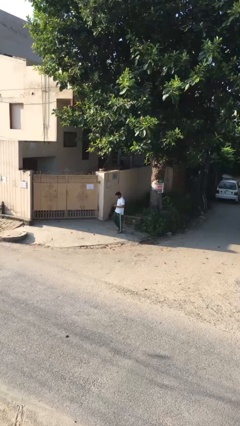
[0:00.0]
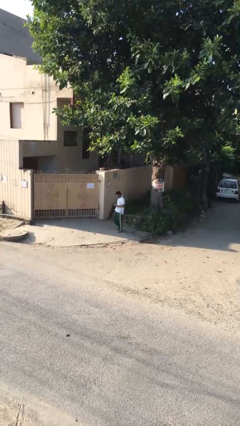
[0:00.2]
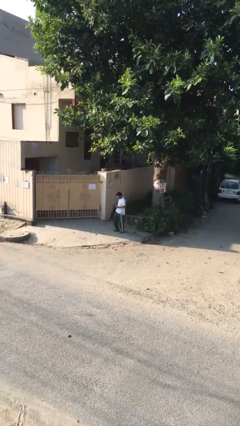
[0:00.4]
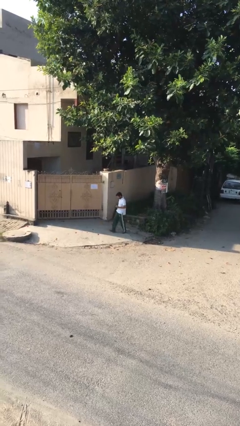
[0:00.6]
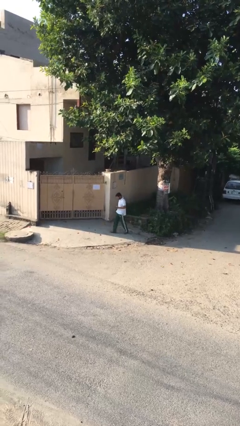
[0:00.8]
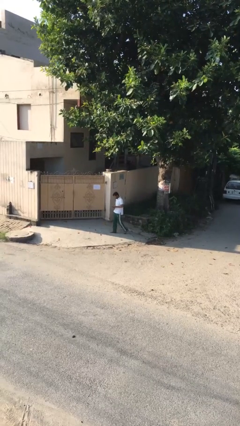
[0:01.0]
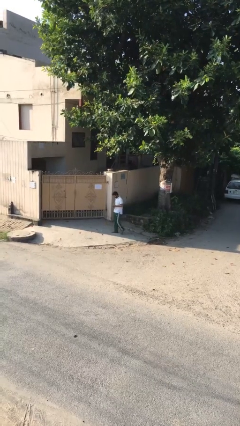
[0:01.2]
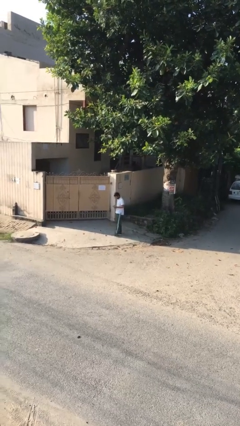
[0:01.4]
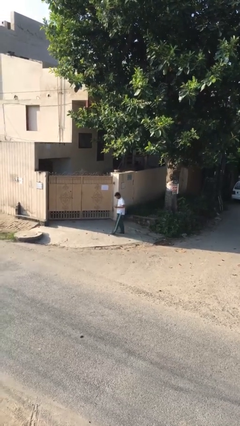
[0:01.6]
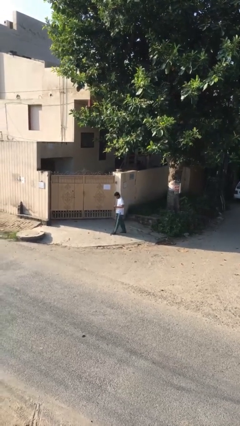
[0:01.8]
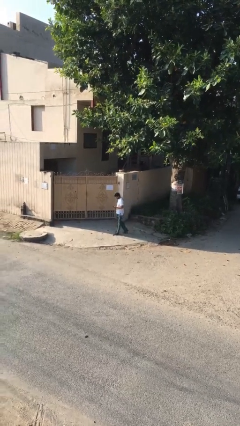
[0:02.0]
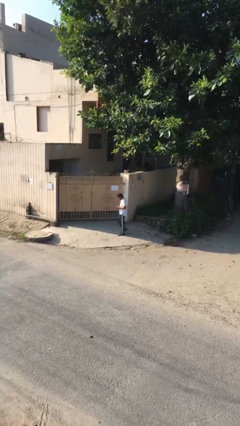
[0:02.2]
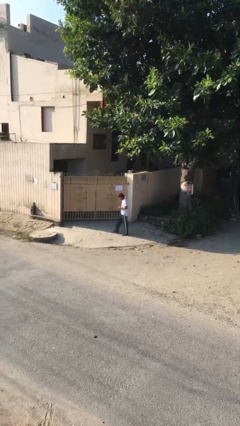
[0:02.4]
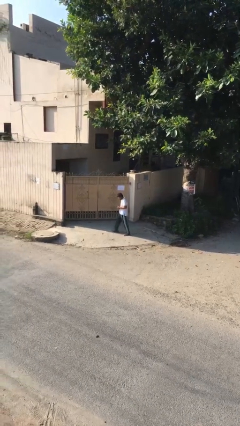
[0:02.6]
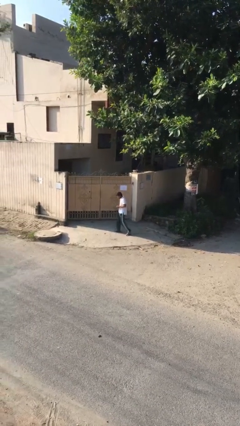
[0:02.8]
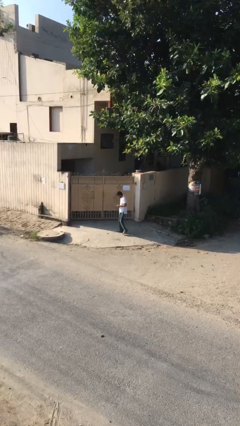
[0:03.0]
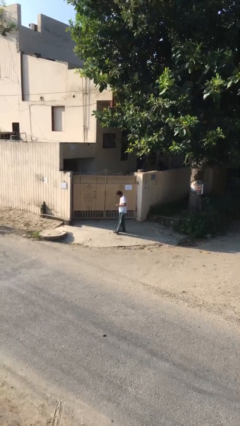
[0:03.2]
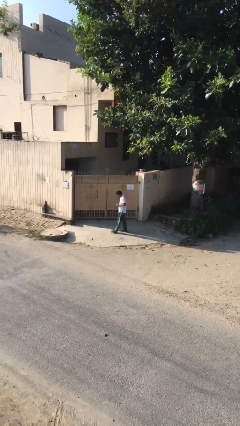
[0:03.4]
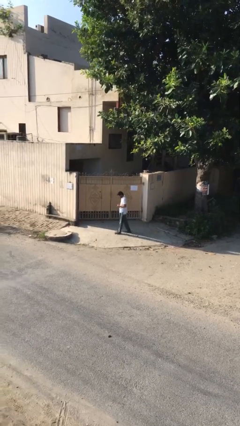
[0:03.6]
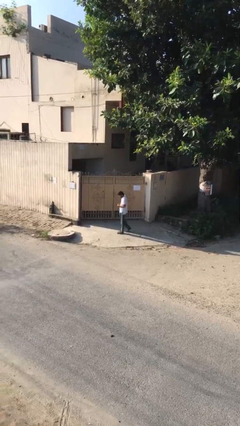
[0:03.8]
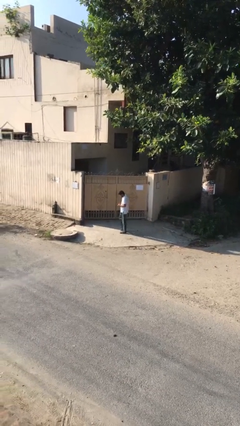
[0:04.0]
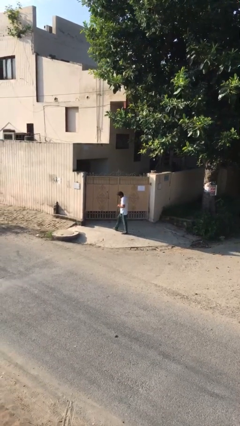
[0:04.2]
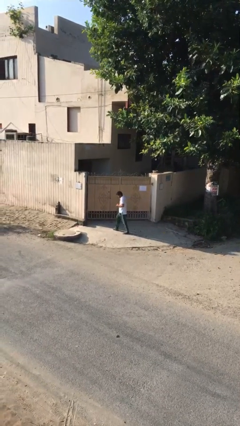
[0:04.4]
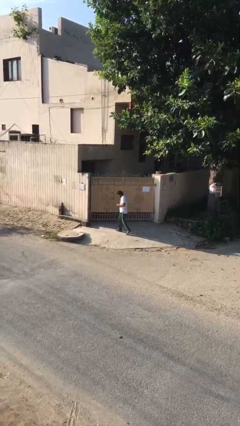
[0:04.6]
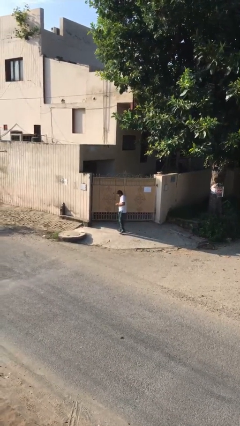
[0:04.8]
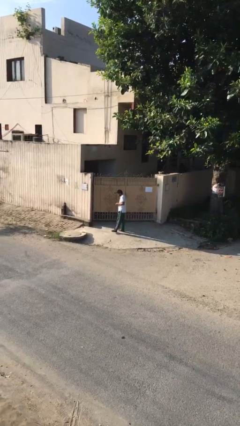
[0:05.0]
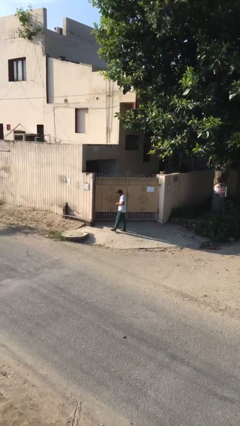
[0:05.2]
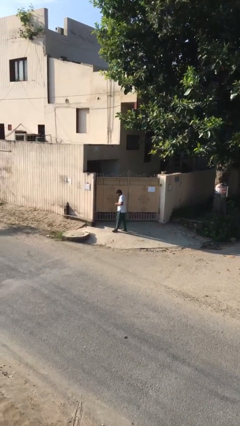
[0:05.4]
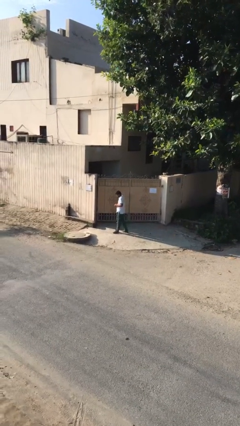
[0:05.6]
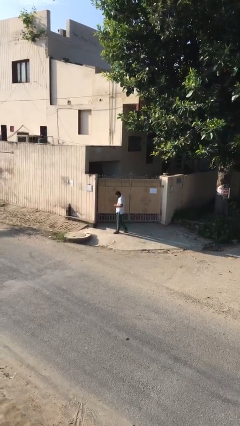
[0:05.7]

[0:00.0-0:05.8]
person texts on phone

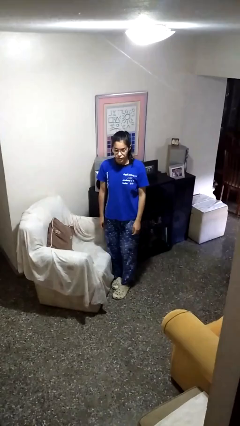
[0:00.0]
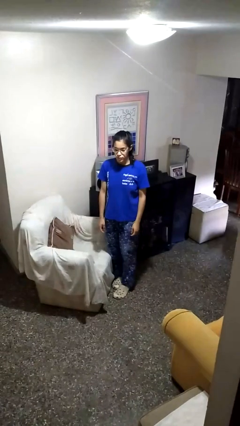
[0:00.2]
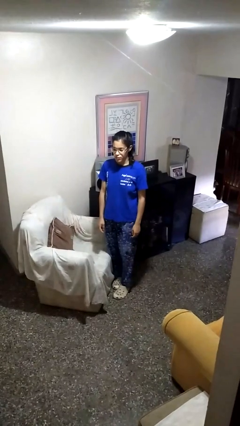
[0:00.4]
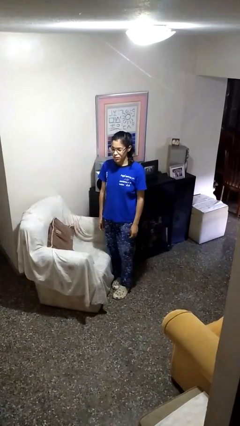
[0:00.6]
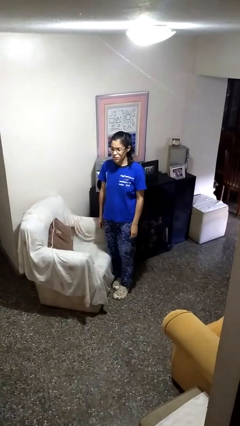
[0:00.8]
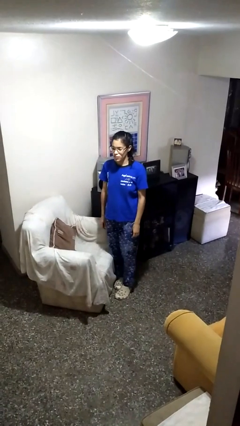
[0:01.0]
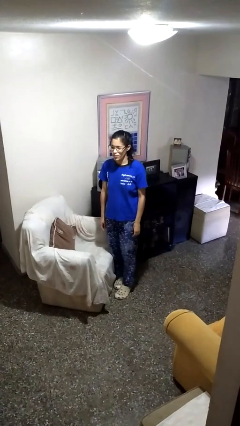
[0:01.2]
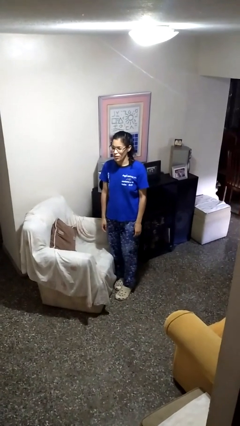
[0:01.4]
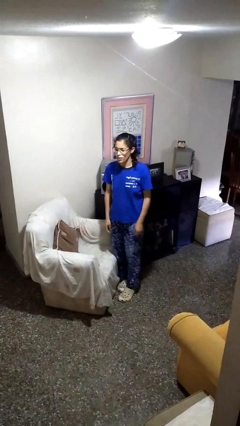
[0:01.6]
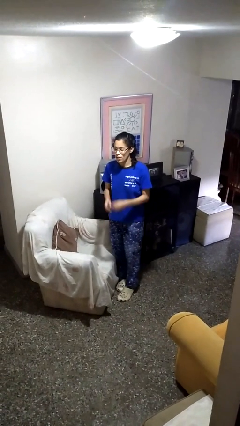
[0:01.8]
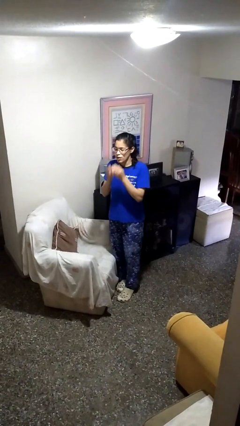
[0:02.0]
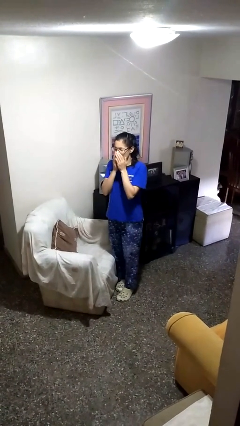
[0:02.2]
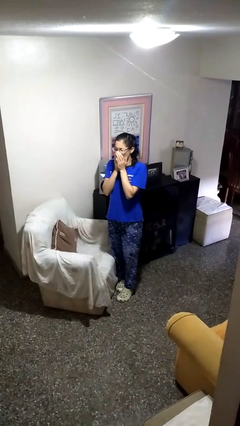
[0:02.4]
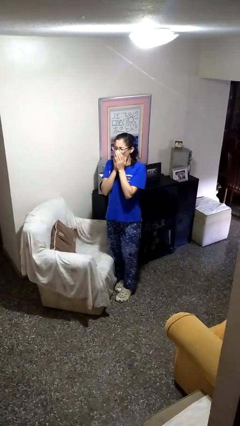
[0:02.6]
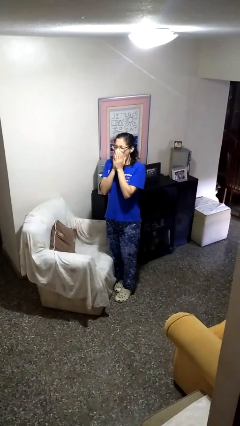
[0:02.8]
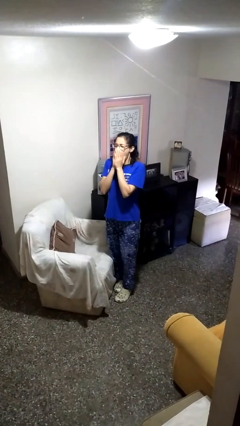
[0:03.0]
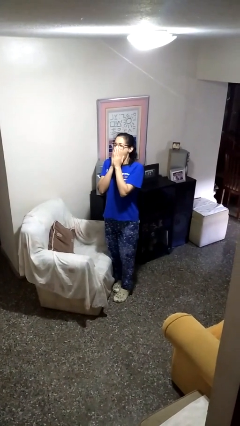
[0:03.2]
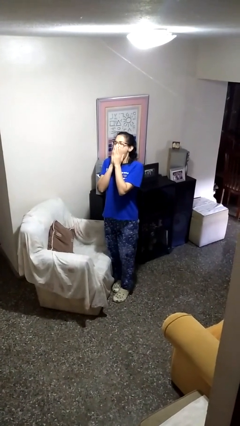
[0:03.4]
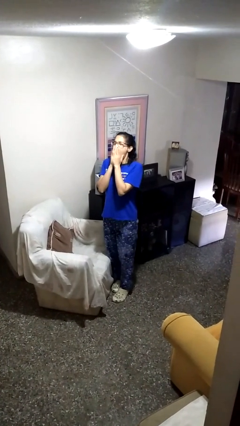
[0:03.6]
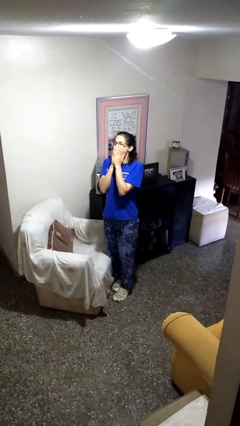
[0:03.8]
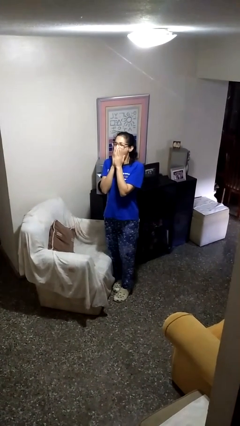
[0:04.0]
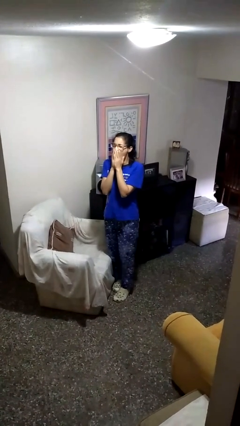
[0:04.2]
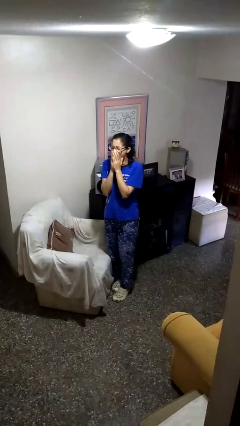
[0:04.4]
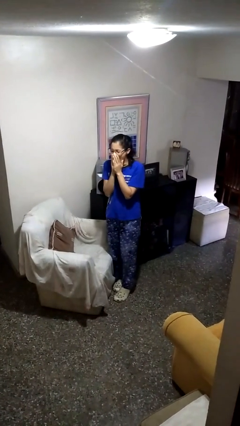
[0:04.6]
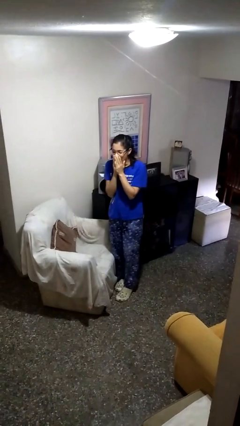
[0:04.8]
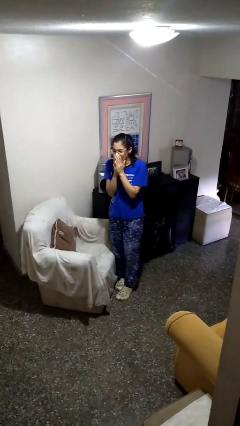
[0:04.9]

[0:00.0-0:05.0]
person yawns

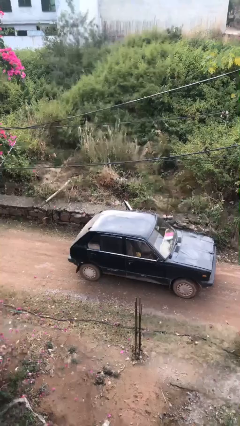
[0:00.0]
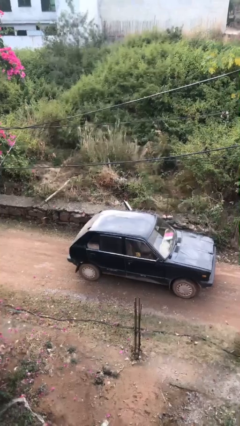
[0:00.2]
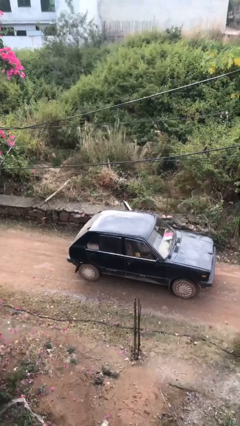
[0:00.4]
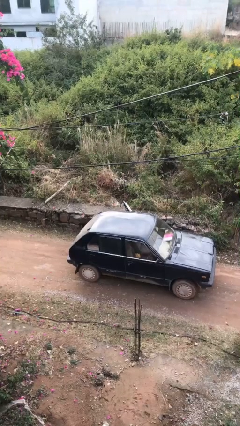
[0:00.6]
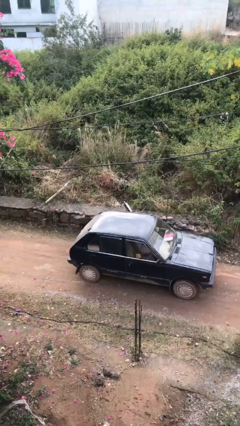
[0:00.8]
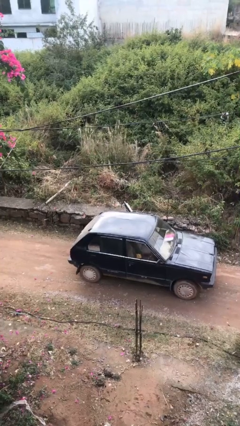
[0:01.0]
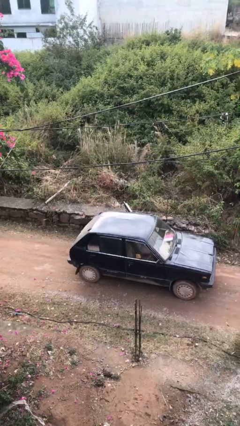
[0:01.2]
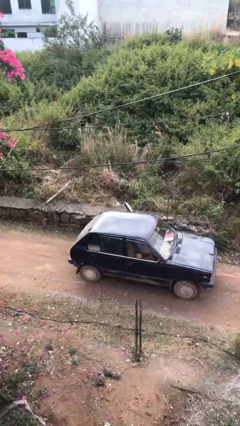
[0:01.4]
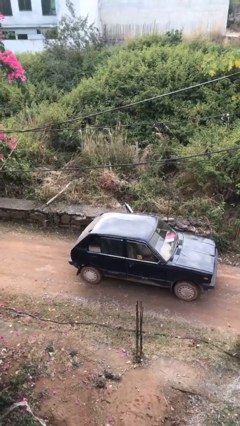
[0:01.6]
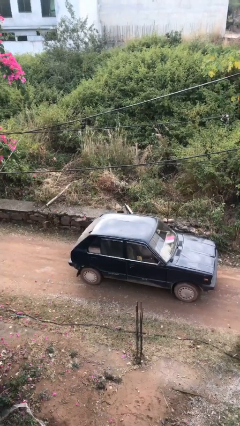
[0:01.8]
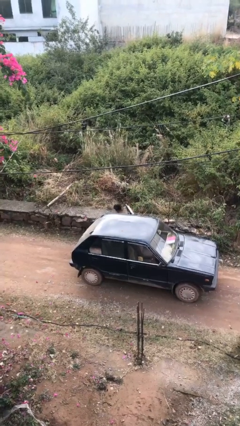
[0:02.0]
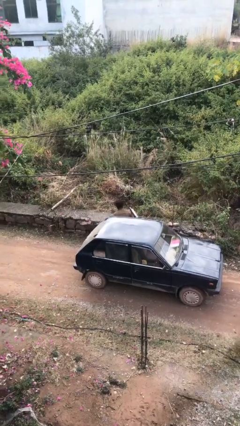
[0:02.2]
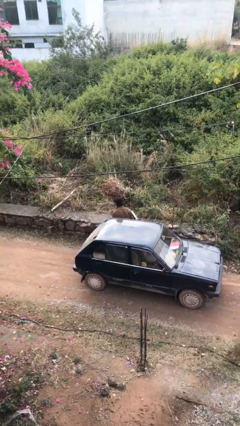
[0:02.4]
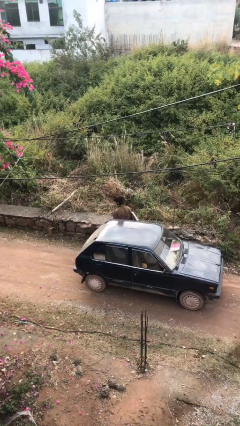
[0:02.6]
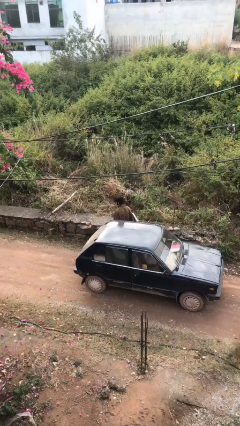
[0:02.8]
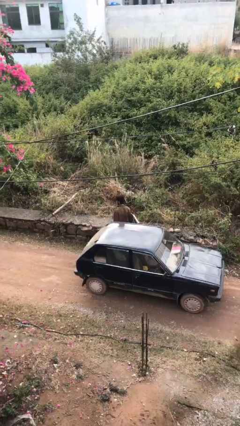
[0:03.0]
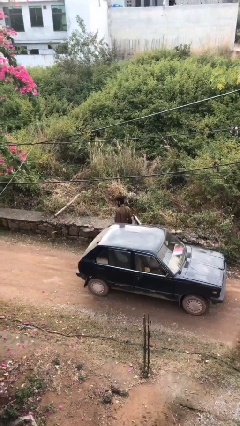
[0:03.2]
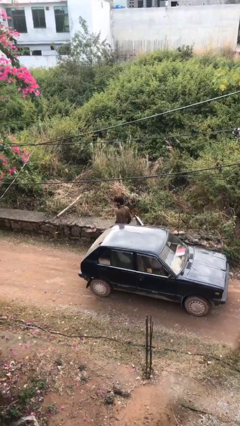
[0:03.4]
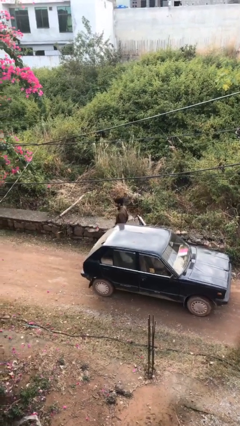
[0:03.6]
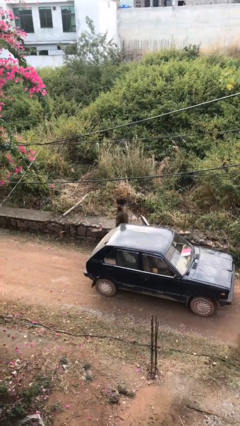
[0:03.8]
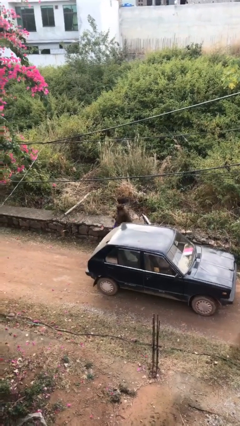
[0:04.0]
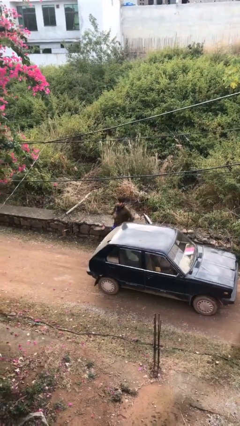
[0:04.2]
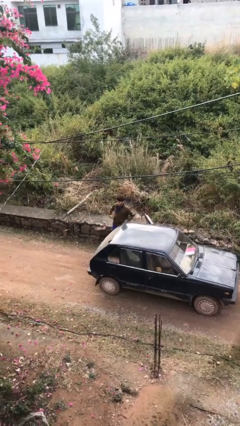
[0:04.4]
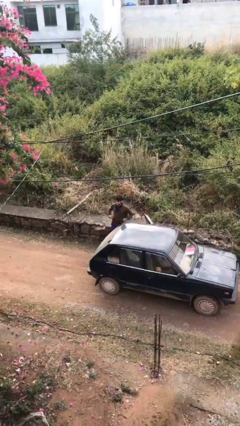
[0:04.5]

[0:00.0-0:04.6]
person exits car

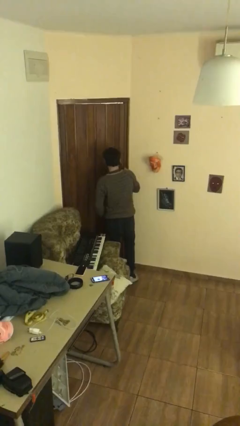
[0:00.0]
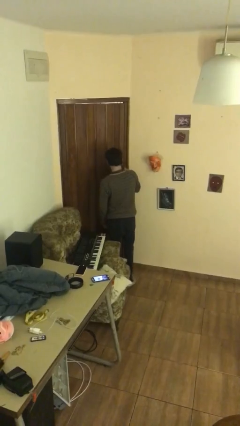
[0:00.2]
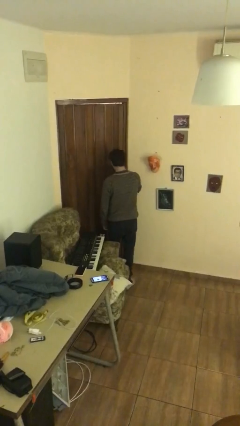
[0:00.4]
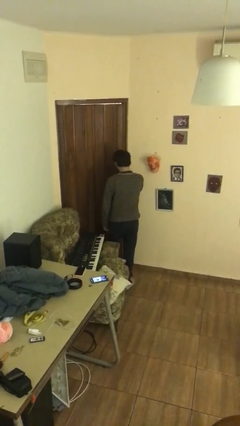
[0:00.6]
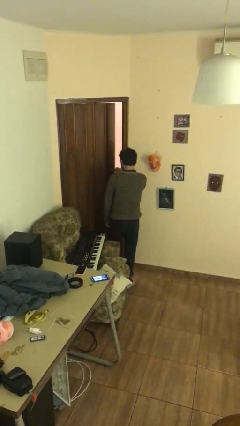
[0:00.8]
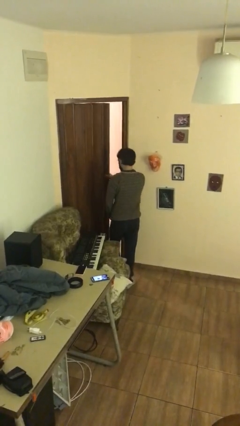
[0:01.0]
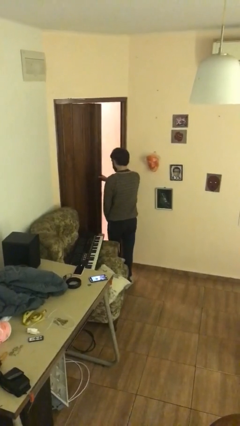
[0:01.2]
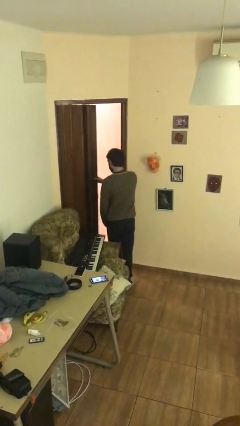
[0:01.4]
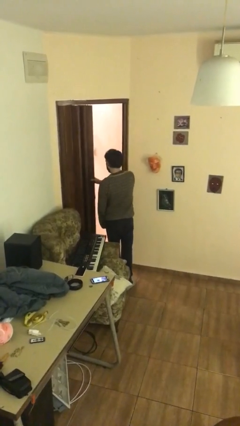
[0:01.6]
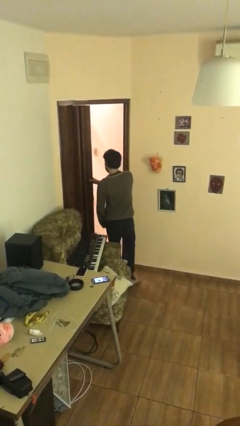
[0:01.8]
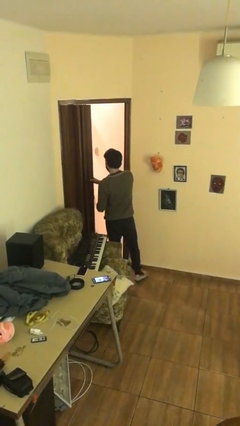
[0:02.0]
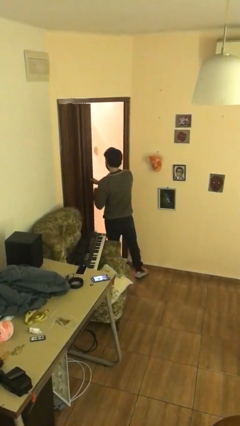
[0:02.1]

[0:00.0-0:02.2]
person opens sliding door

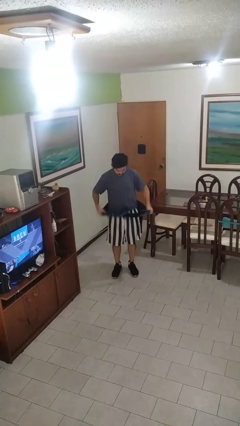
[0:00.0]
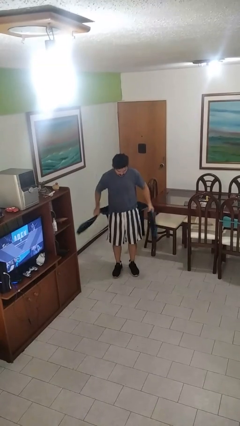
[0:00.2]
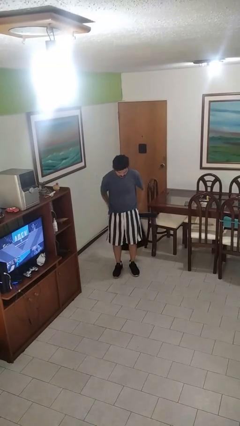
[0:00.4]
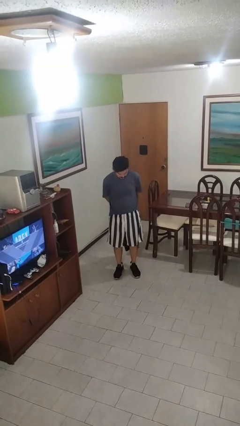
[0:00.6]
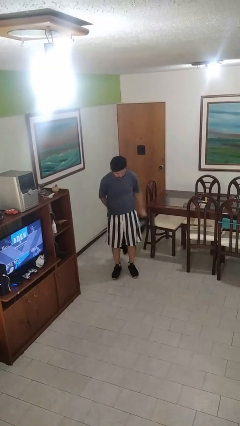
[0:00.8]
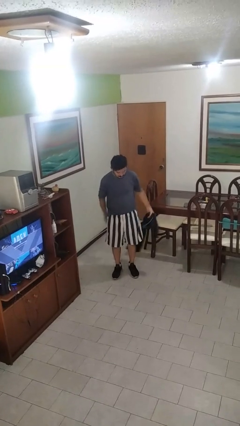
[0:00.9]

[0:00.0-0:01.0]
person unties jacket around waist
